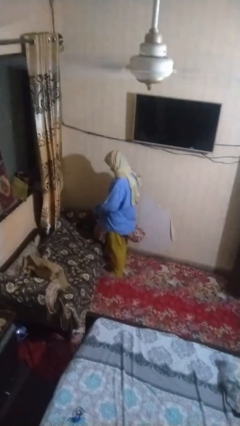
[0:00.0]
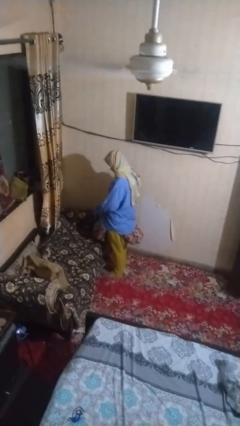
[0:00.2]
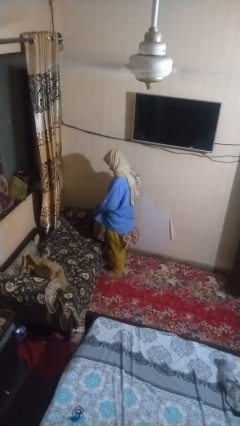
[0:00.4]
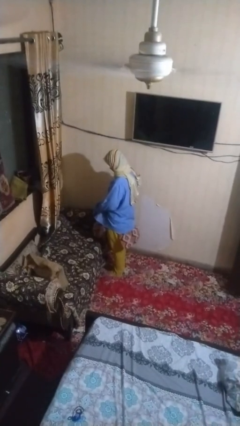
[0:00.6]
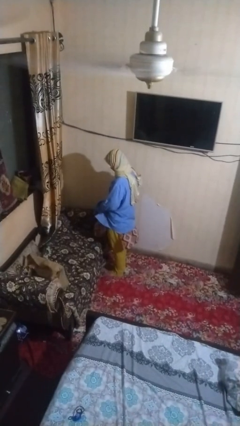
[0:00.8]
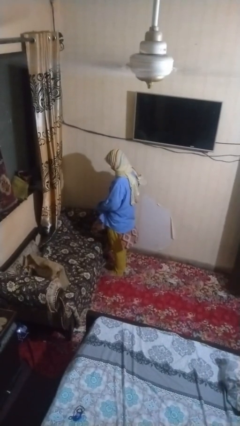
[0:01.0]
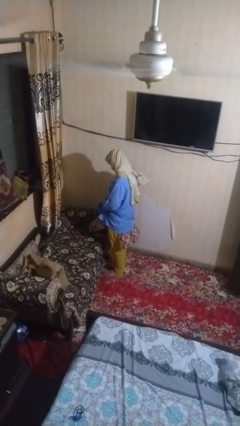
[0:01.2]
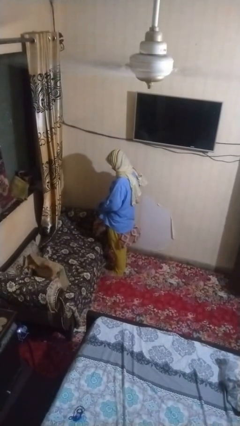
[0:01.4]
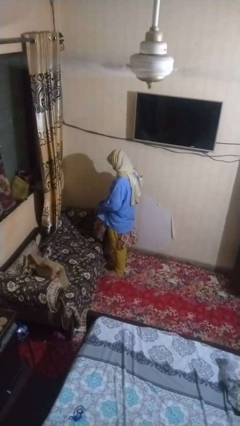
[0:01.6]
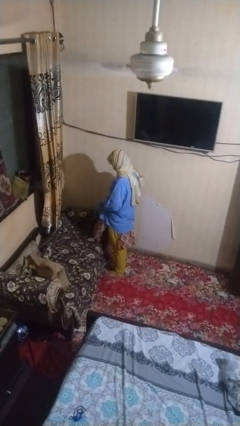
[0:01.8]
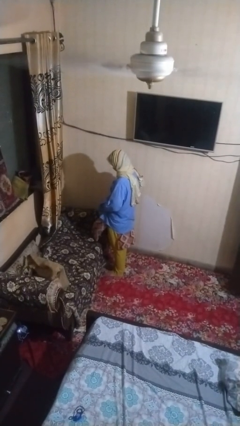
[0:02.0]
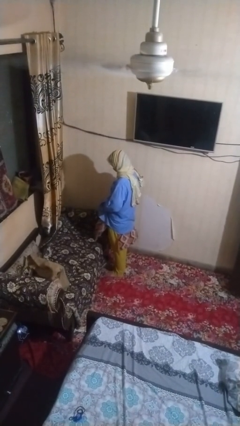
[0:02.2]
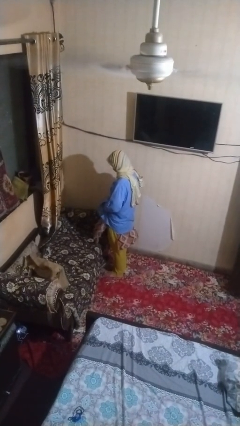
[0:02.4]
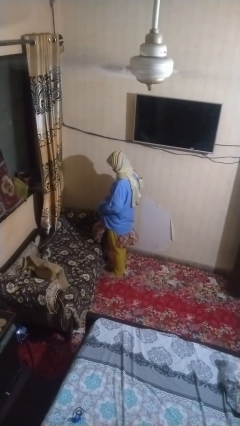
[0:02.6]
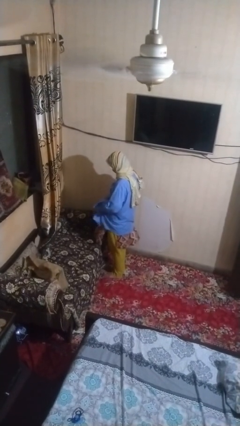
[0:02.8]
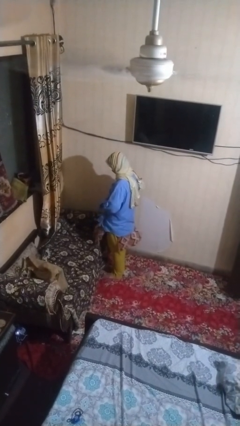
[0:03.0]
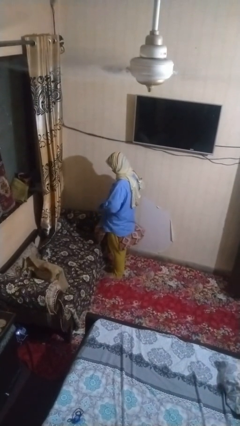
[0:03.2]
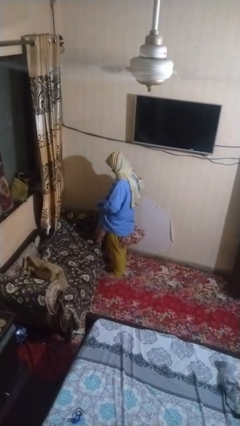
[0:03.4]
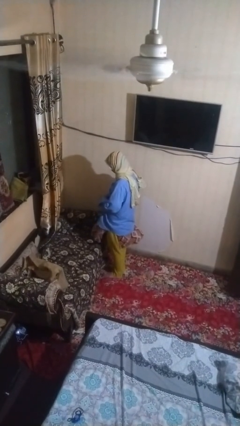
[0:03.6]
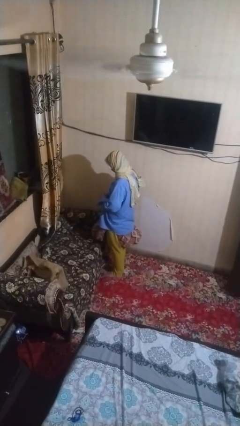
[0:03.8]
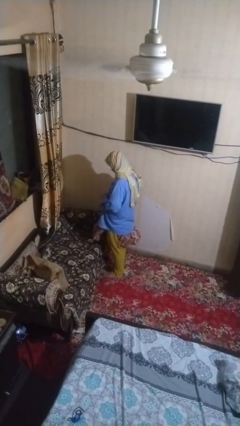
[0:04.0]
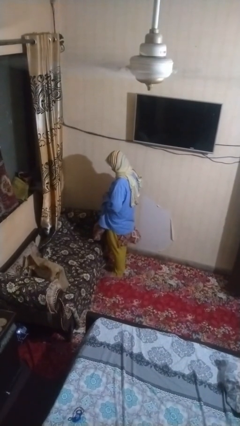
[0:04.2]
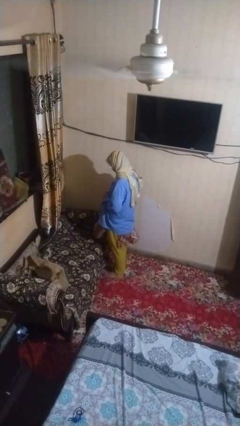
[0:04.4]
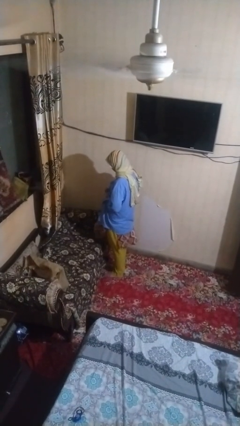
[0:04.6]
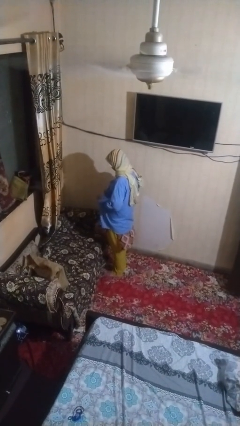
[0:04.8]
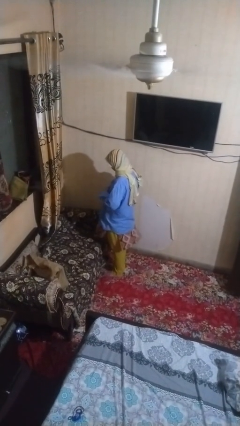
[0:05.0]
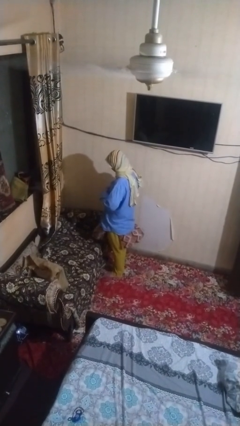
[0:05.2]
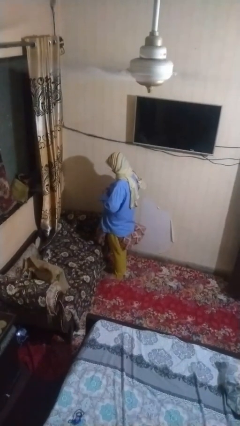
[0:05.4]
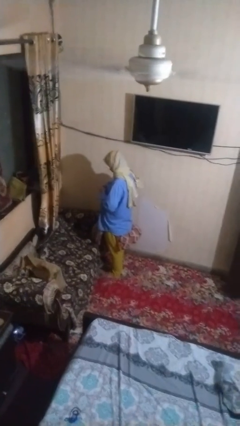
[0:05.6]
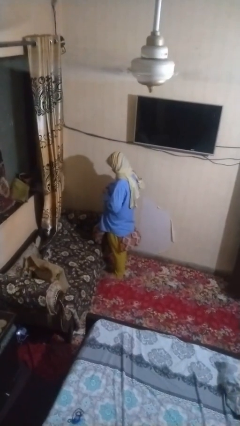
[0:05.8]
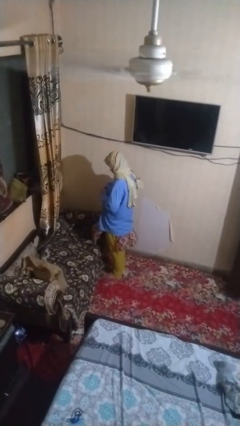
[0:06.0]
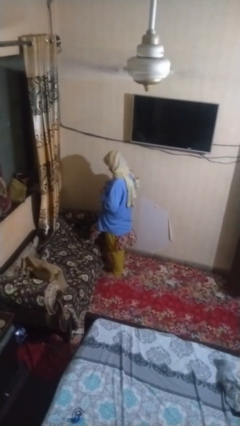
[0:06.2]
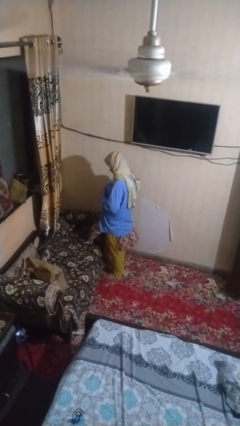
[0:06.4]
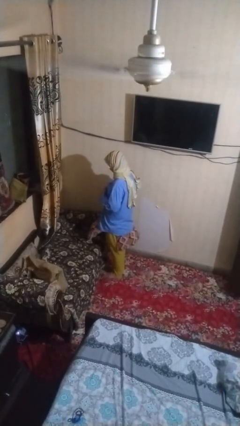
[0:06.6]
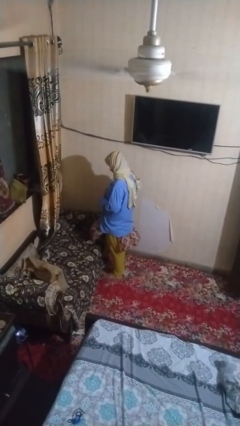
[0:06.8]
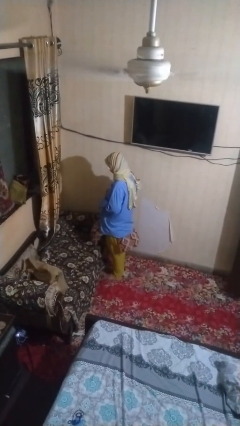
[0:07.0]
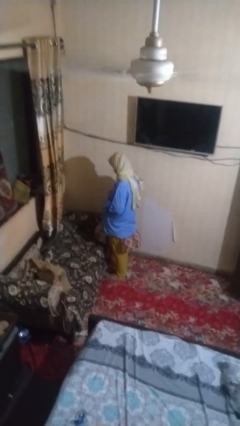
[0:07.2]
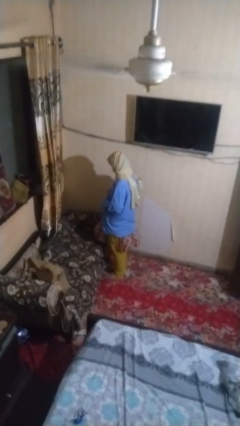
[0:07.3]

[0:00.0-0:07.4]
person unbuttons shirt

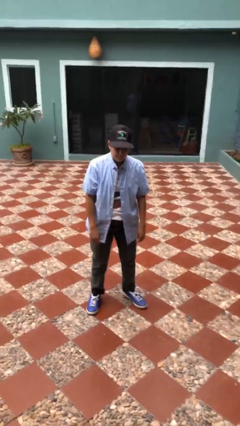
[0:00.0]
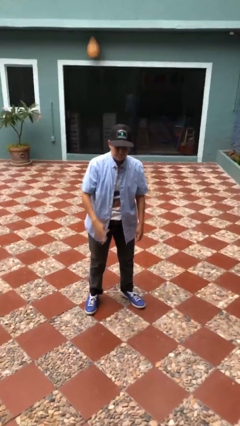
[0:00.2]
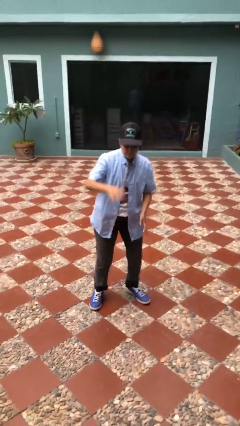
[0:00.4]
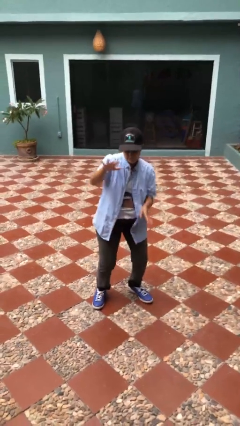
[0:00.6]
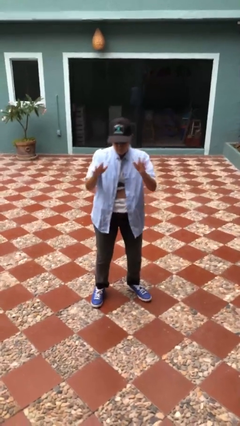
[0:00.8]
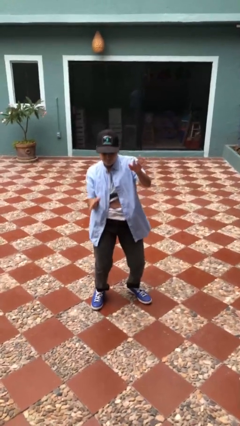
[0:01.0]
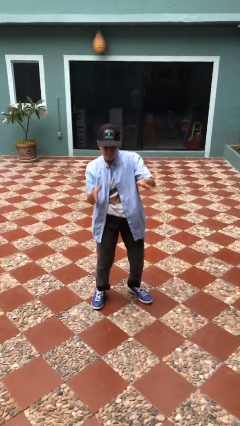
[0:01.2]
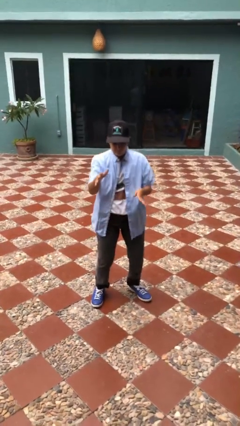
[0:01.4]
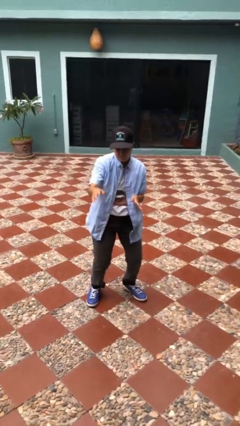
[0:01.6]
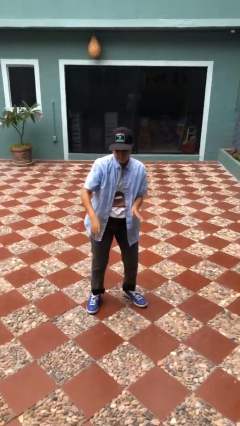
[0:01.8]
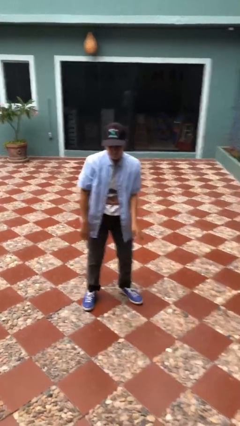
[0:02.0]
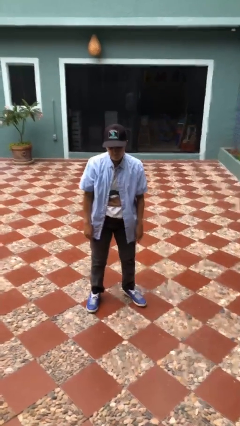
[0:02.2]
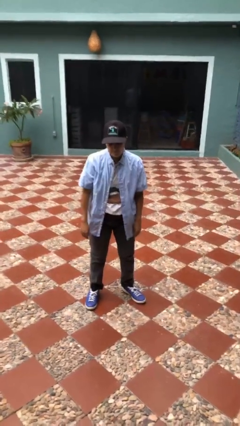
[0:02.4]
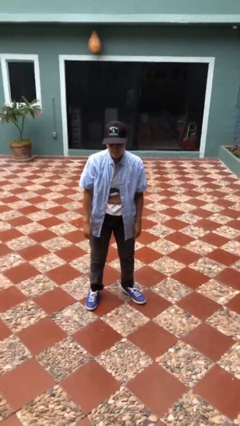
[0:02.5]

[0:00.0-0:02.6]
person dances in place

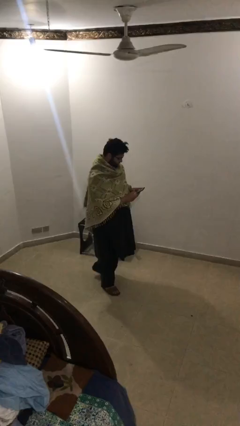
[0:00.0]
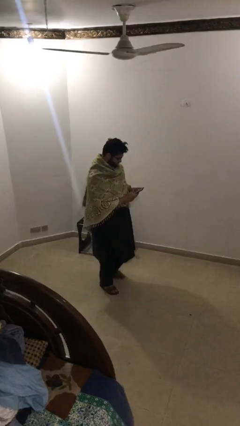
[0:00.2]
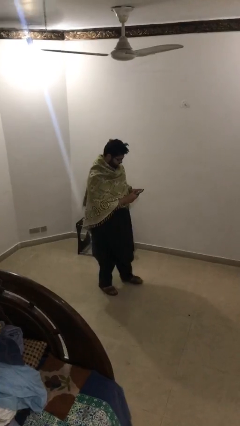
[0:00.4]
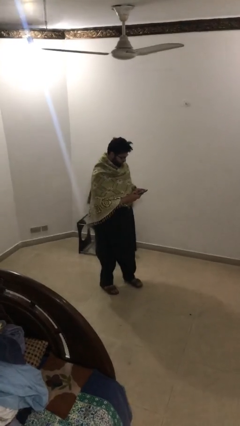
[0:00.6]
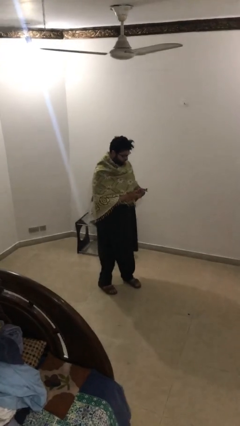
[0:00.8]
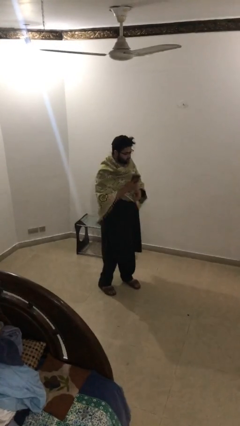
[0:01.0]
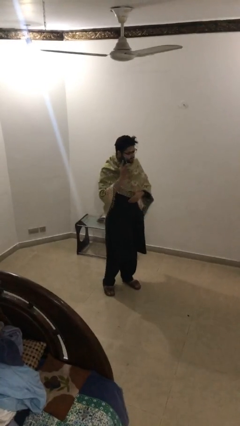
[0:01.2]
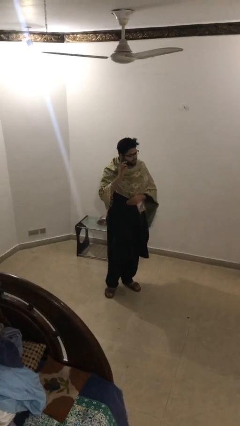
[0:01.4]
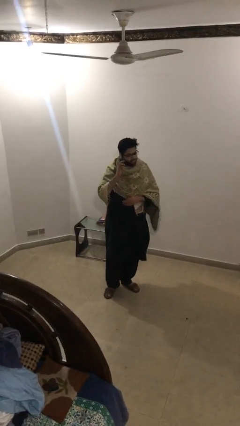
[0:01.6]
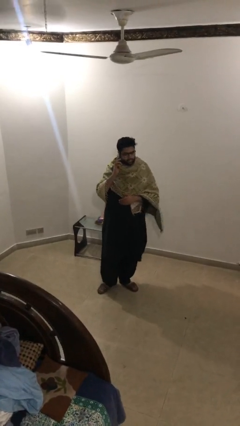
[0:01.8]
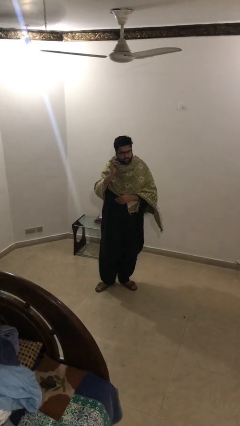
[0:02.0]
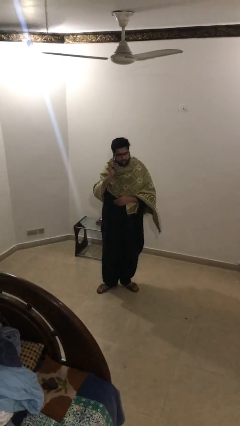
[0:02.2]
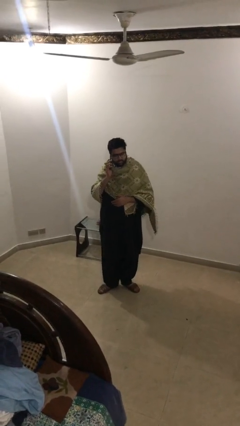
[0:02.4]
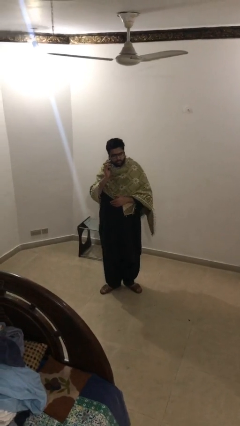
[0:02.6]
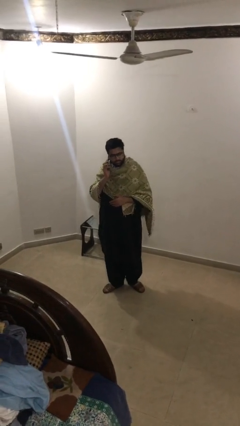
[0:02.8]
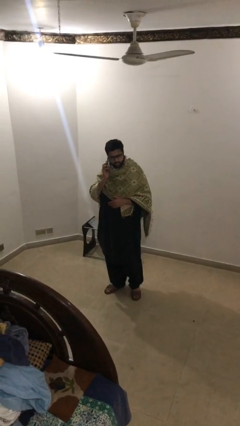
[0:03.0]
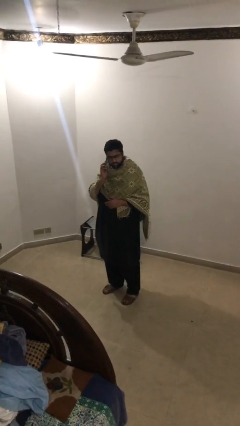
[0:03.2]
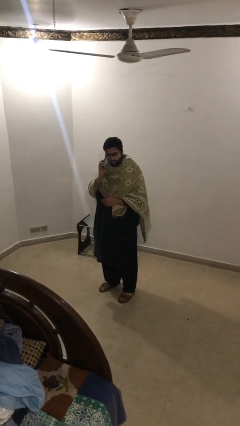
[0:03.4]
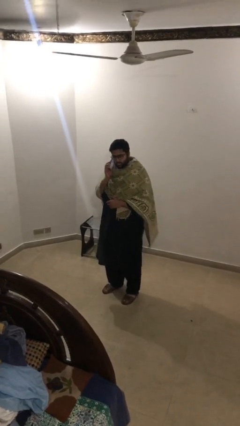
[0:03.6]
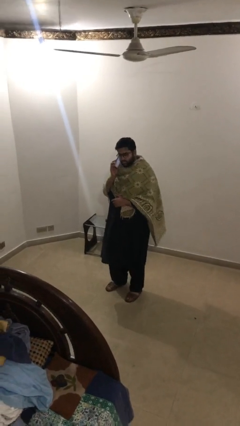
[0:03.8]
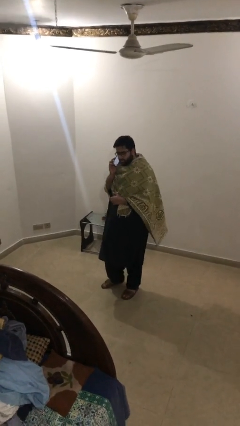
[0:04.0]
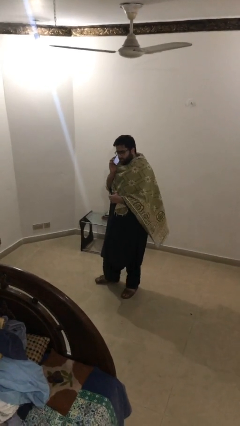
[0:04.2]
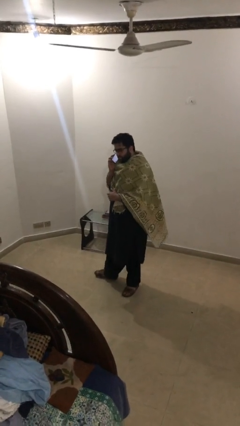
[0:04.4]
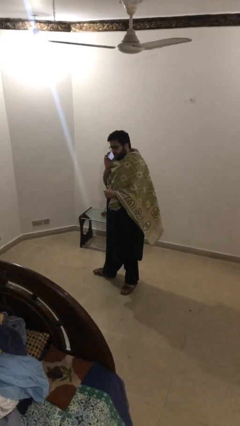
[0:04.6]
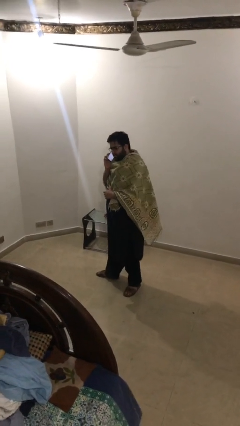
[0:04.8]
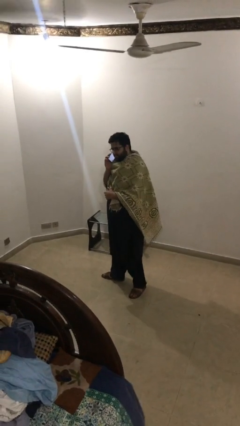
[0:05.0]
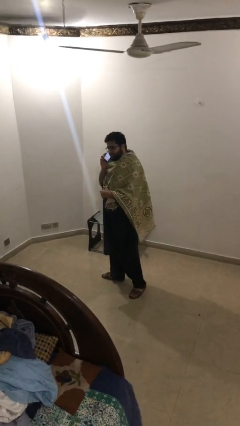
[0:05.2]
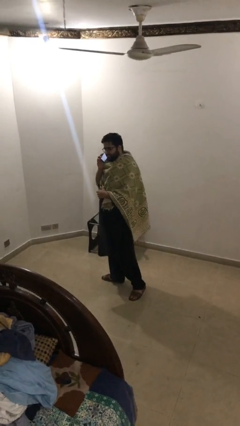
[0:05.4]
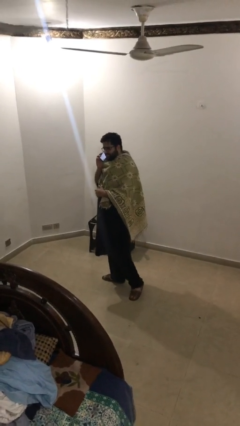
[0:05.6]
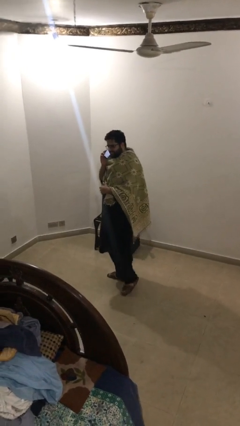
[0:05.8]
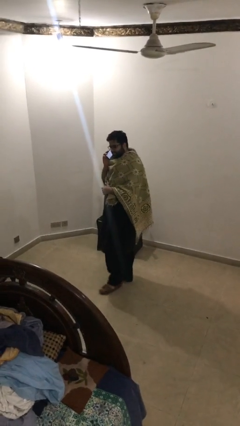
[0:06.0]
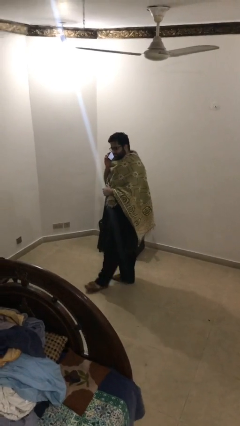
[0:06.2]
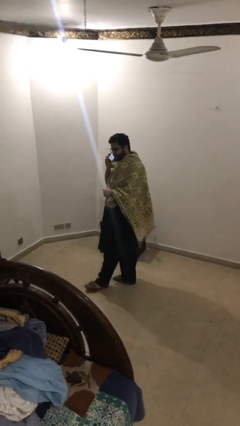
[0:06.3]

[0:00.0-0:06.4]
person talks on phone

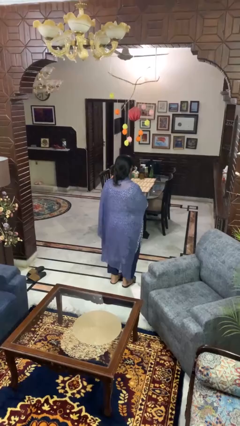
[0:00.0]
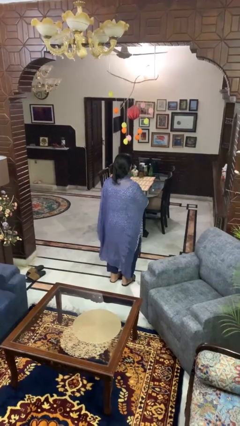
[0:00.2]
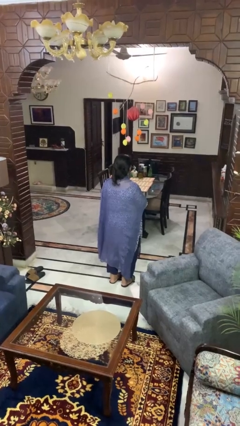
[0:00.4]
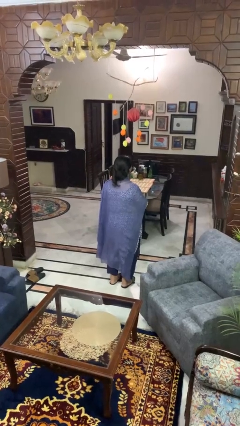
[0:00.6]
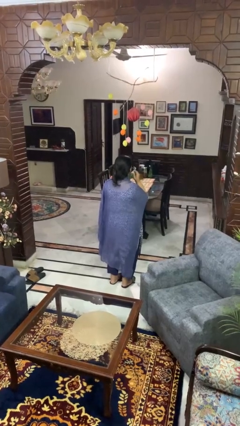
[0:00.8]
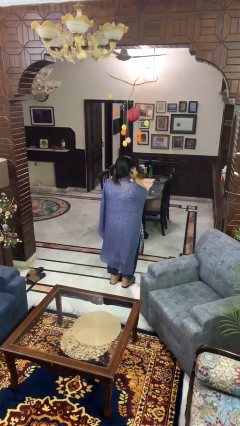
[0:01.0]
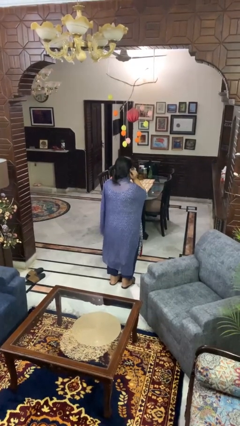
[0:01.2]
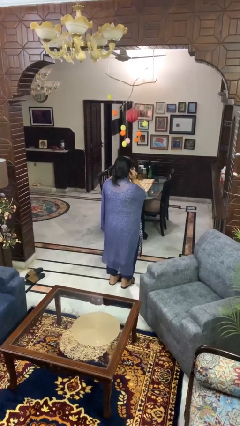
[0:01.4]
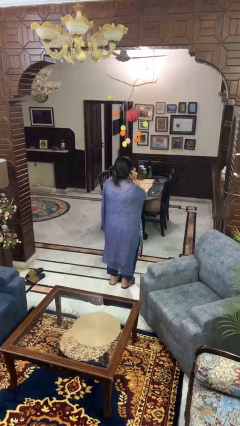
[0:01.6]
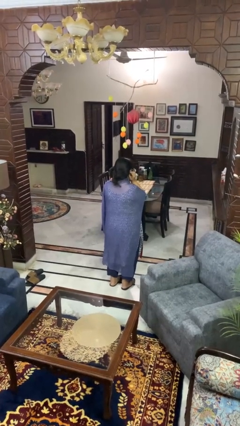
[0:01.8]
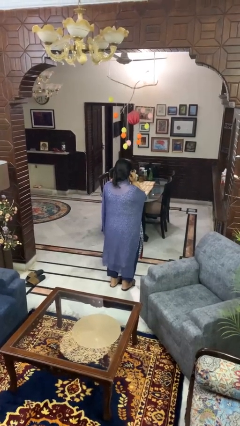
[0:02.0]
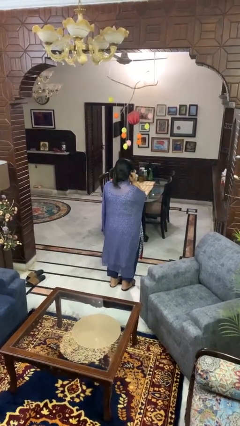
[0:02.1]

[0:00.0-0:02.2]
person puts fingers in ear
